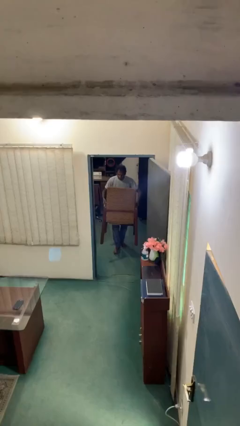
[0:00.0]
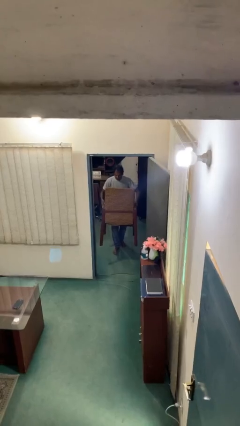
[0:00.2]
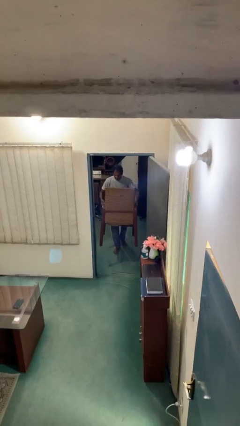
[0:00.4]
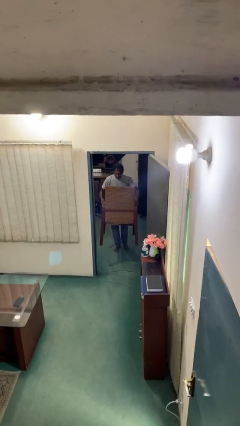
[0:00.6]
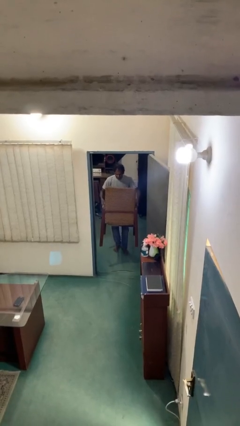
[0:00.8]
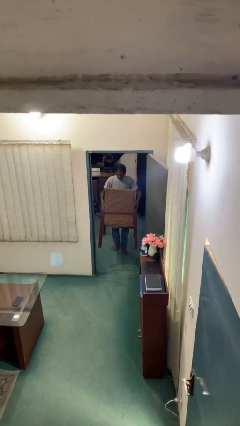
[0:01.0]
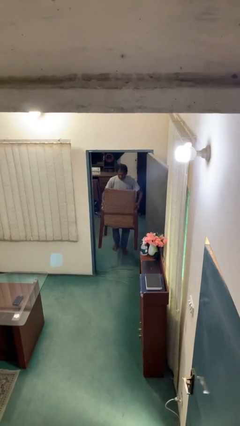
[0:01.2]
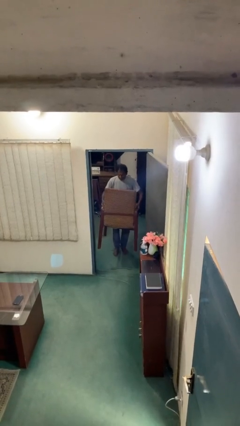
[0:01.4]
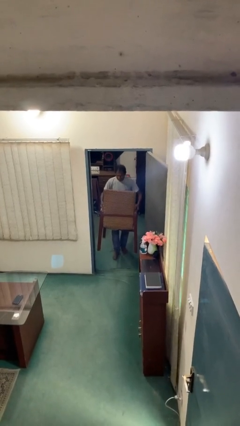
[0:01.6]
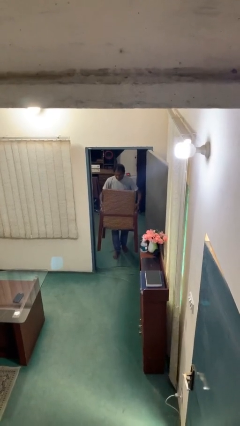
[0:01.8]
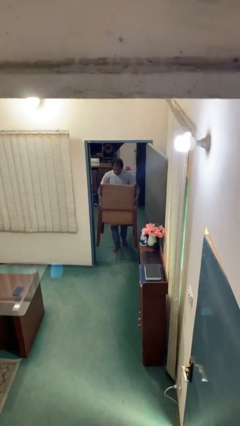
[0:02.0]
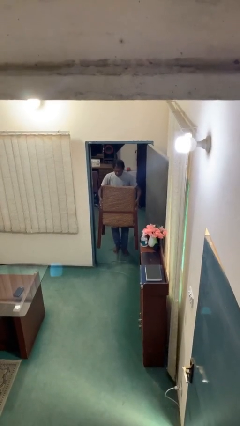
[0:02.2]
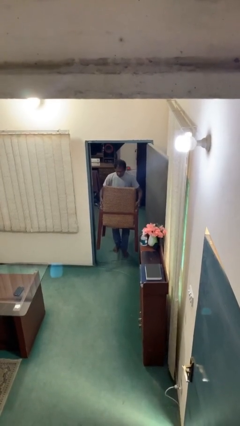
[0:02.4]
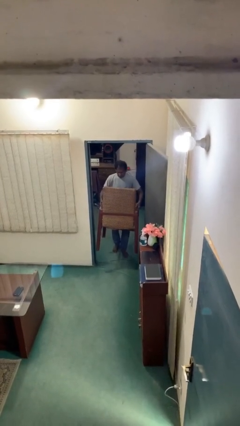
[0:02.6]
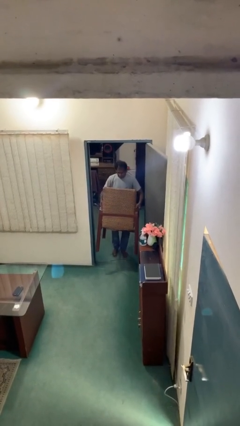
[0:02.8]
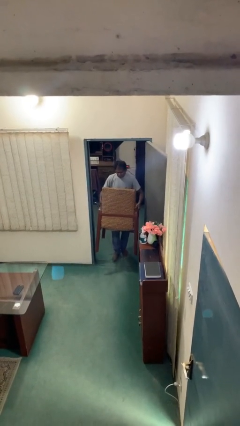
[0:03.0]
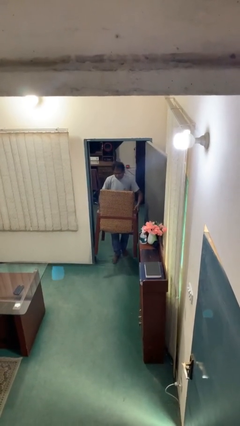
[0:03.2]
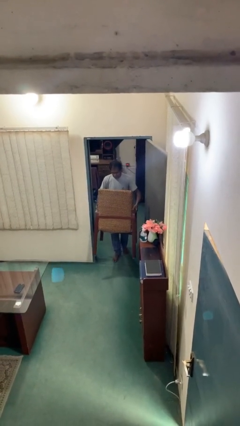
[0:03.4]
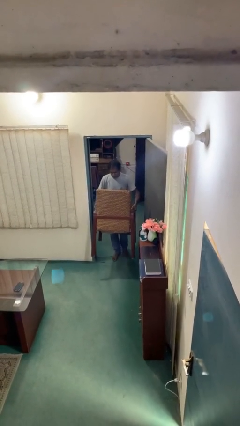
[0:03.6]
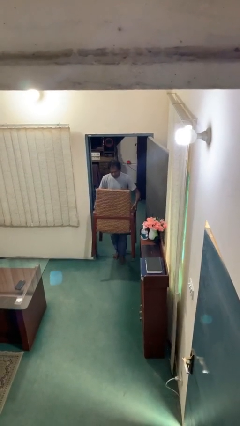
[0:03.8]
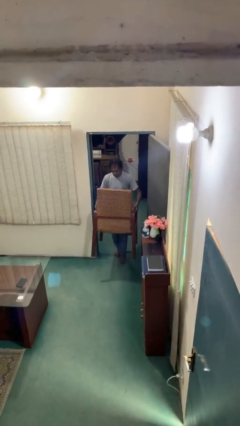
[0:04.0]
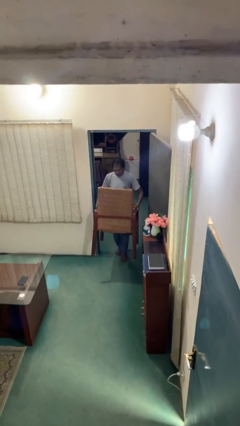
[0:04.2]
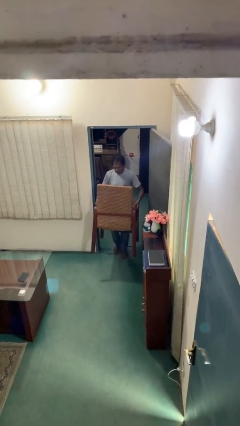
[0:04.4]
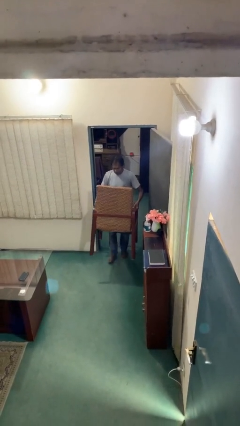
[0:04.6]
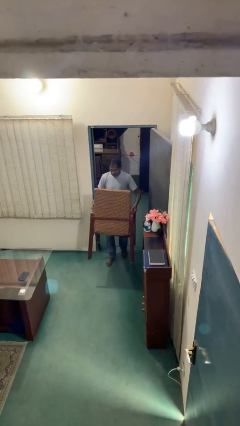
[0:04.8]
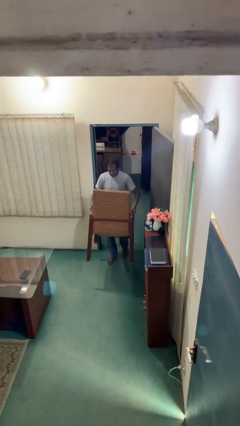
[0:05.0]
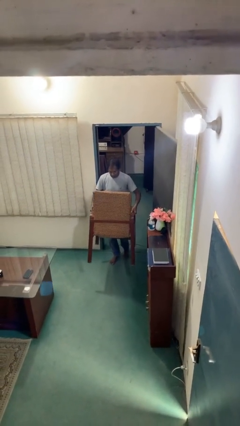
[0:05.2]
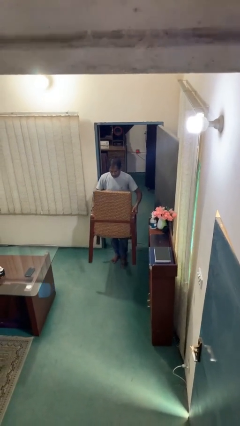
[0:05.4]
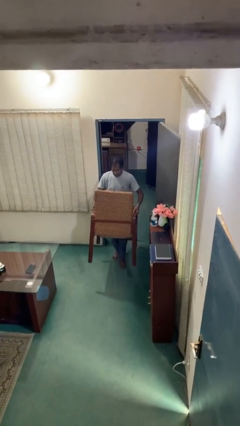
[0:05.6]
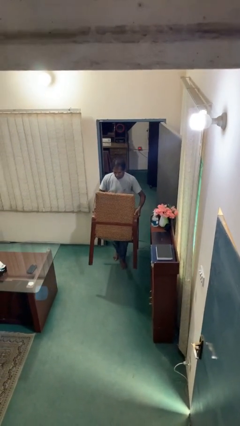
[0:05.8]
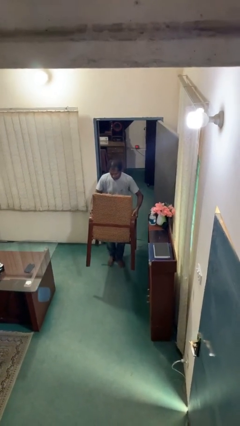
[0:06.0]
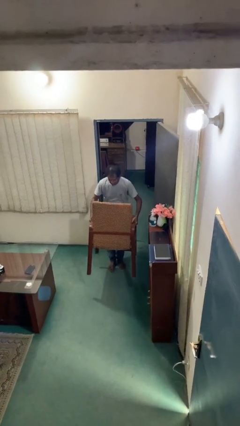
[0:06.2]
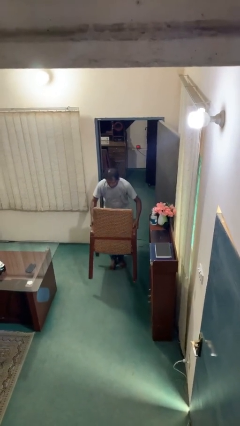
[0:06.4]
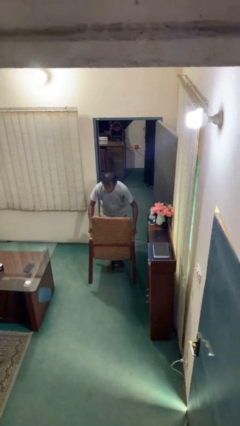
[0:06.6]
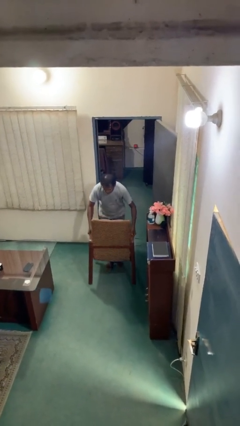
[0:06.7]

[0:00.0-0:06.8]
person carries heavy object

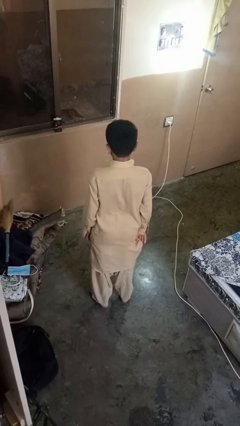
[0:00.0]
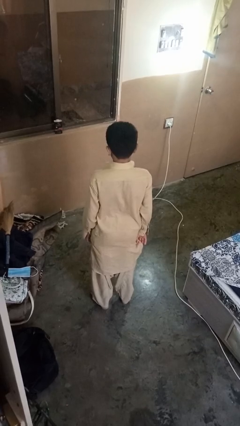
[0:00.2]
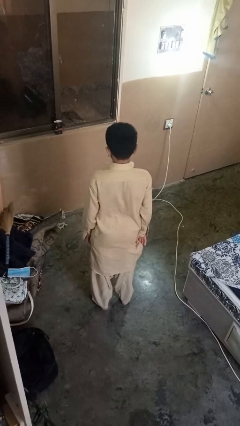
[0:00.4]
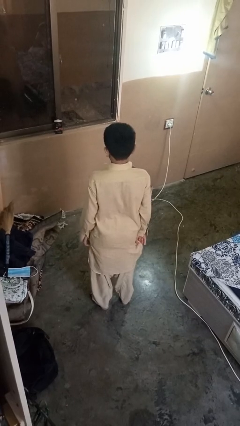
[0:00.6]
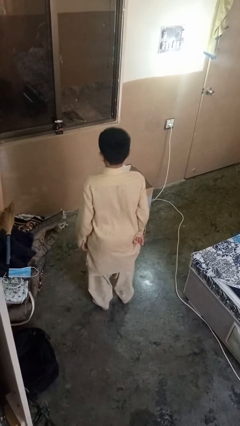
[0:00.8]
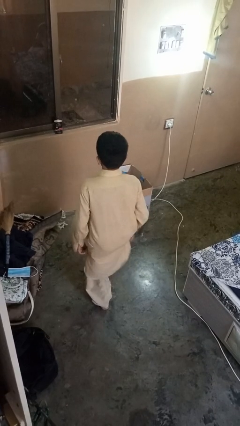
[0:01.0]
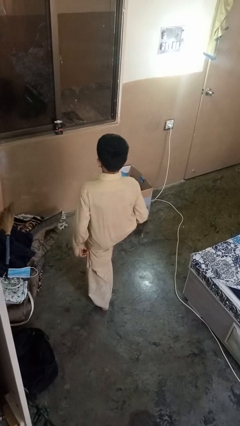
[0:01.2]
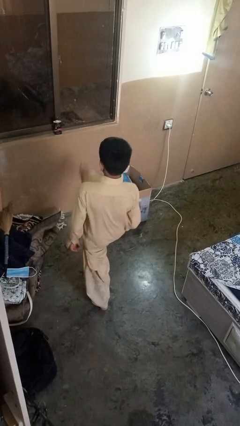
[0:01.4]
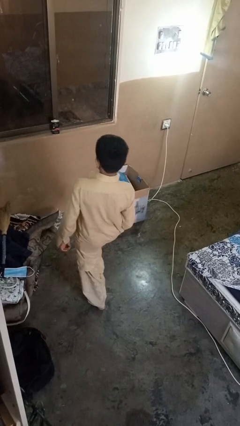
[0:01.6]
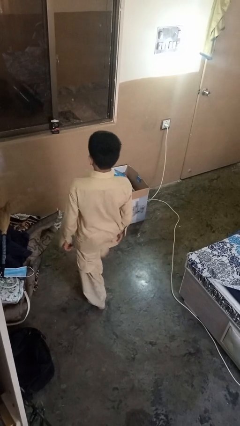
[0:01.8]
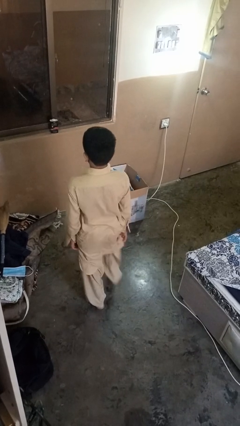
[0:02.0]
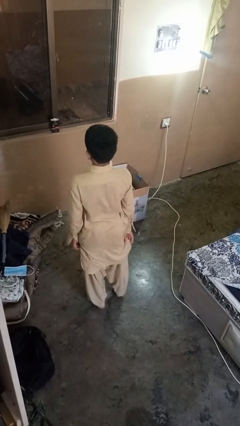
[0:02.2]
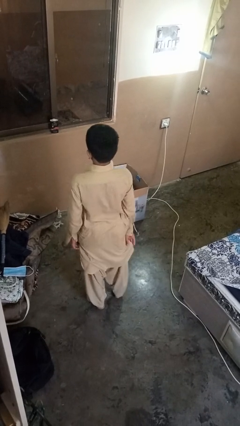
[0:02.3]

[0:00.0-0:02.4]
person karate kicks

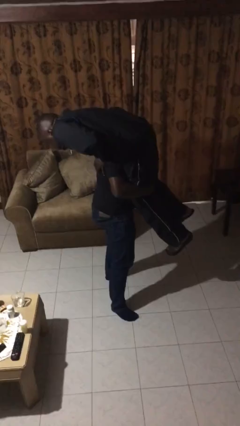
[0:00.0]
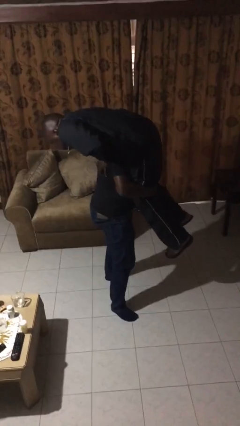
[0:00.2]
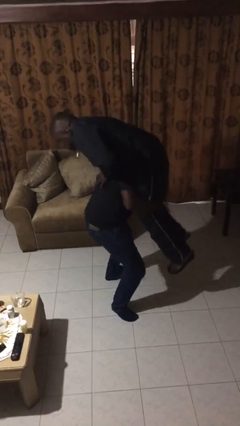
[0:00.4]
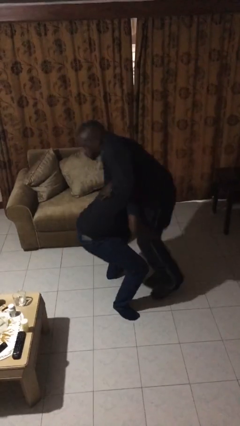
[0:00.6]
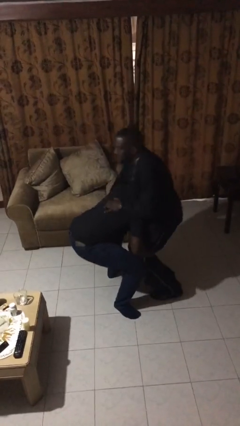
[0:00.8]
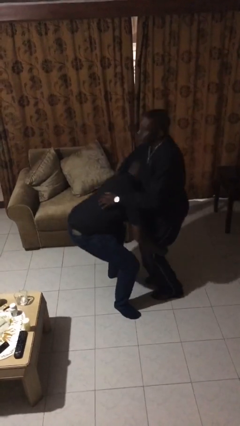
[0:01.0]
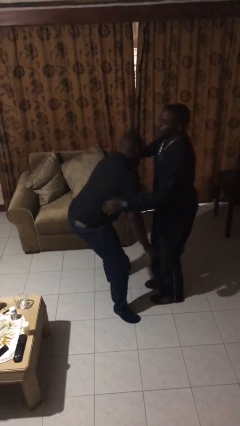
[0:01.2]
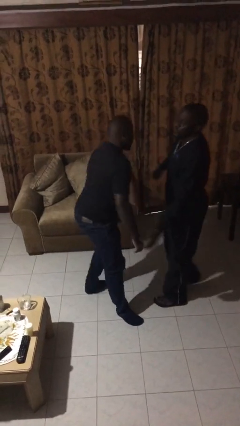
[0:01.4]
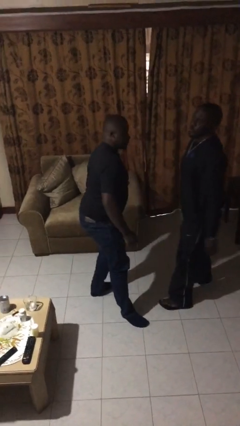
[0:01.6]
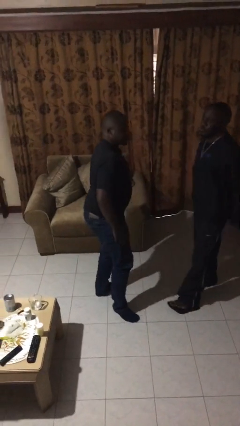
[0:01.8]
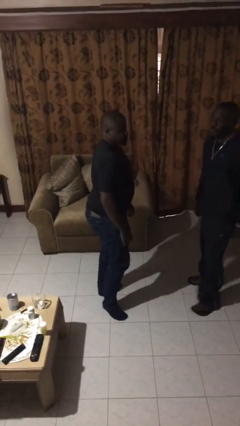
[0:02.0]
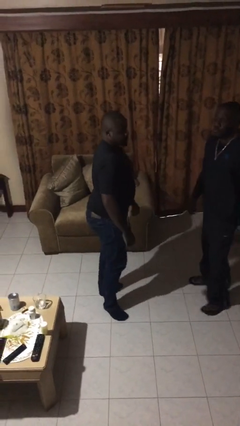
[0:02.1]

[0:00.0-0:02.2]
person puts down person

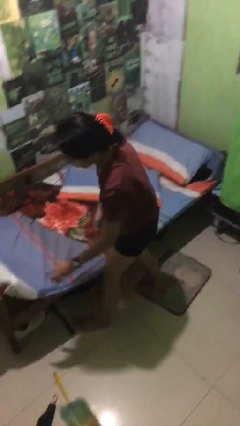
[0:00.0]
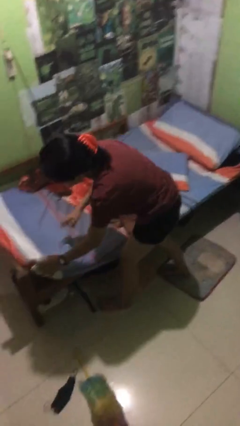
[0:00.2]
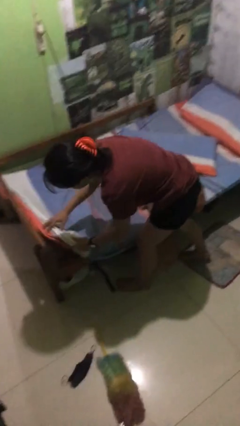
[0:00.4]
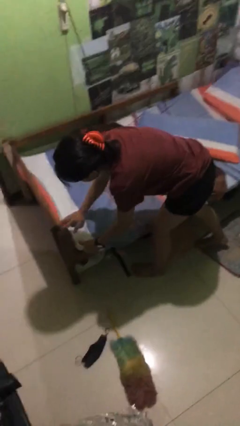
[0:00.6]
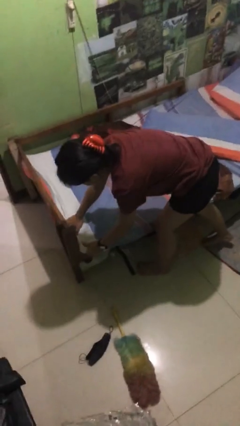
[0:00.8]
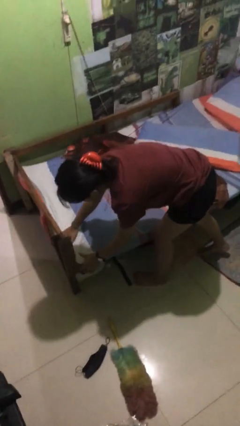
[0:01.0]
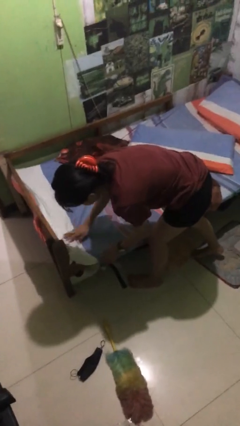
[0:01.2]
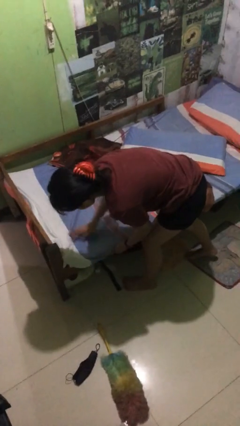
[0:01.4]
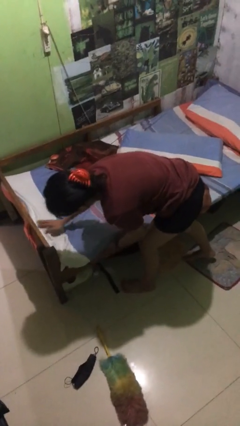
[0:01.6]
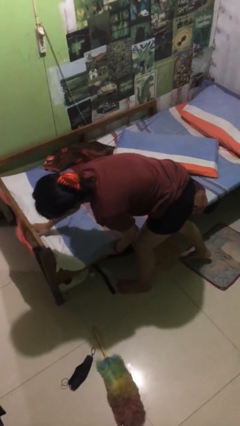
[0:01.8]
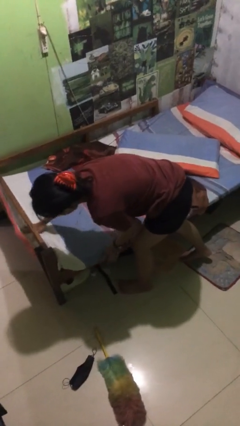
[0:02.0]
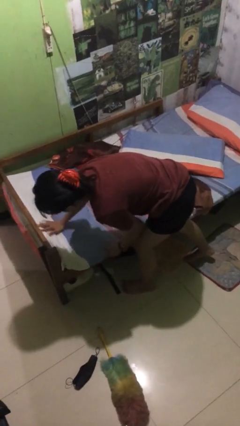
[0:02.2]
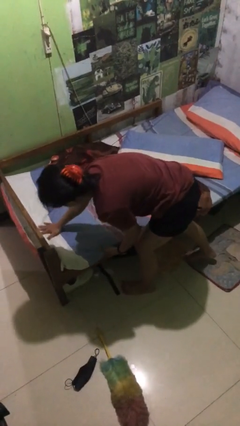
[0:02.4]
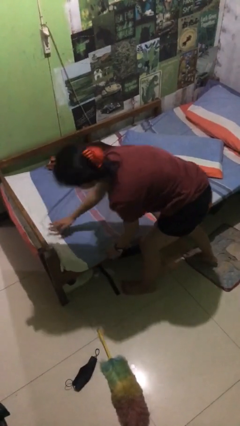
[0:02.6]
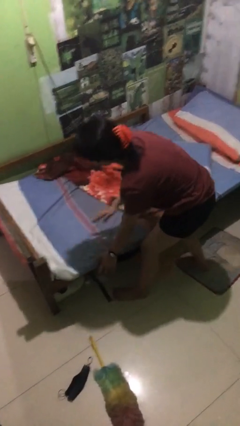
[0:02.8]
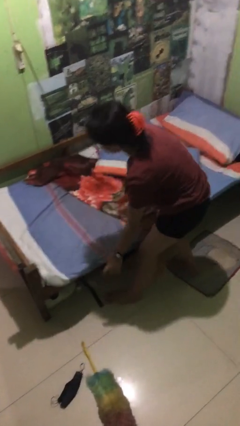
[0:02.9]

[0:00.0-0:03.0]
person makes bed

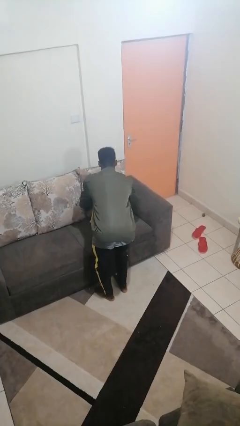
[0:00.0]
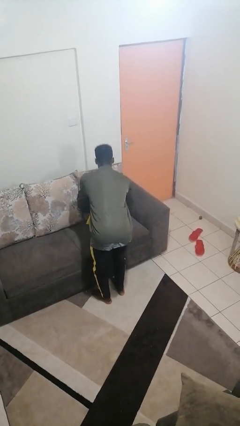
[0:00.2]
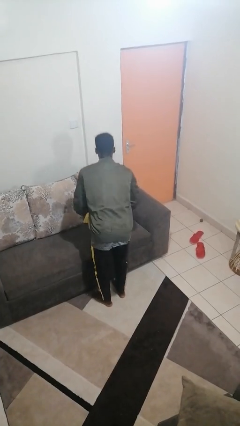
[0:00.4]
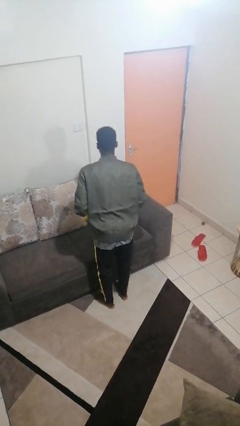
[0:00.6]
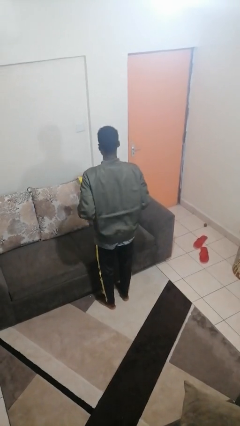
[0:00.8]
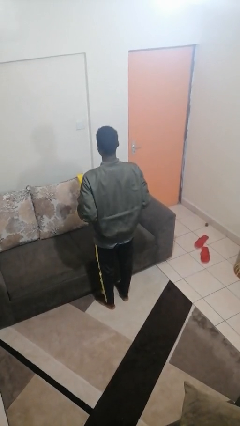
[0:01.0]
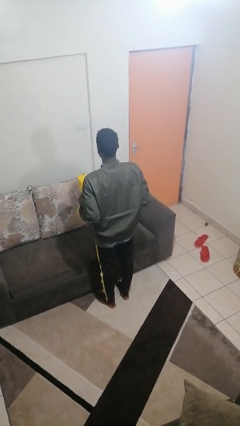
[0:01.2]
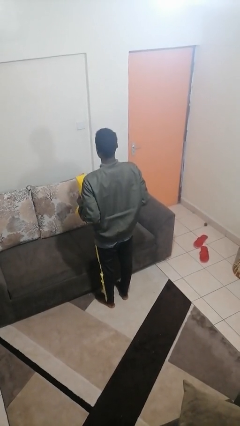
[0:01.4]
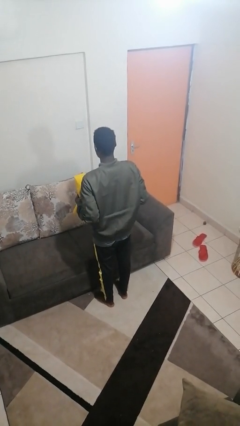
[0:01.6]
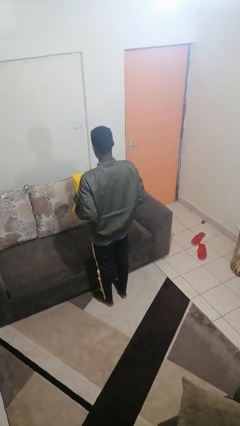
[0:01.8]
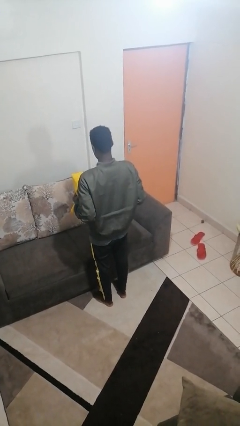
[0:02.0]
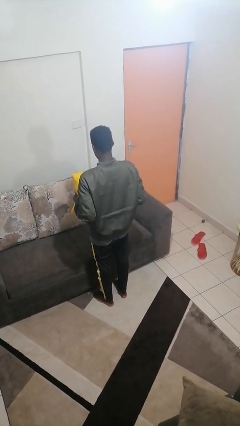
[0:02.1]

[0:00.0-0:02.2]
person picks up object from couch

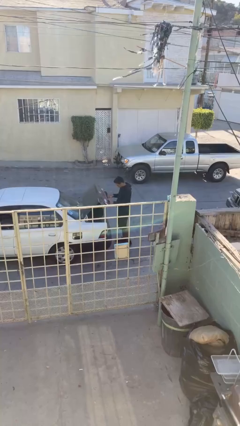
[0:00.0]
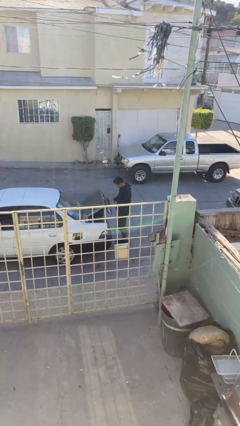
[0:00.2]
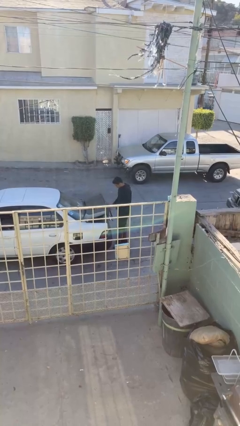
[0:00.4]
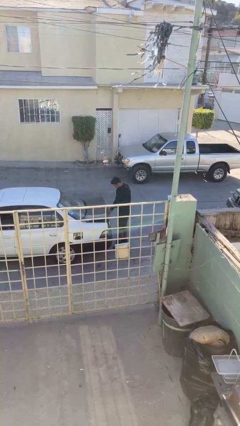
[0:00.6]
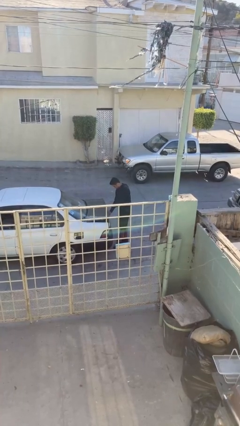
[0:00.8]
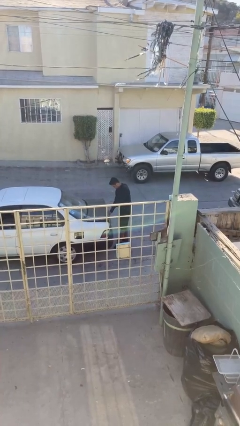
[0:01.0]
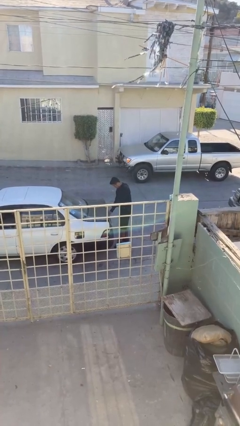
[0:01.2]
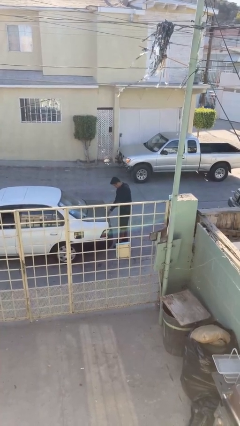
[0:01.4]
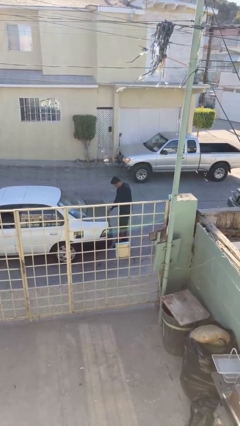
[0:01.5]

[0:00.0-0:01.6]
person closes car trunk
